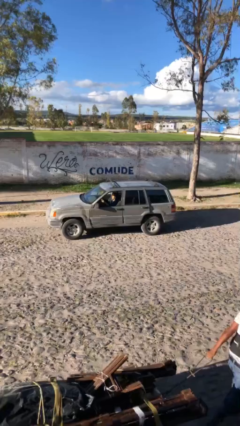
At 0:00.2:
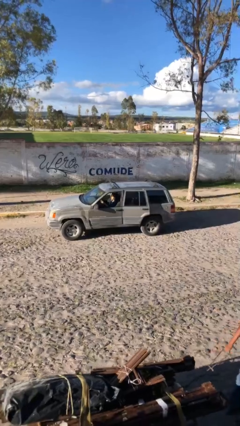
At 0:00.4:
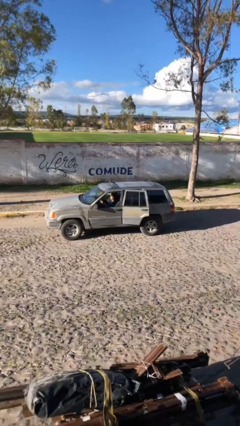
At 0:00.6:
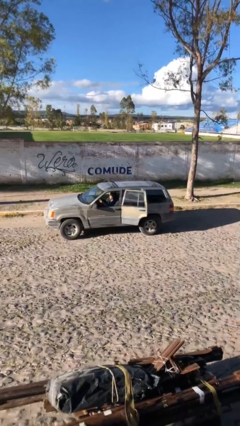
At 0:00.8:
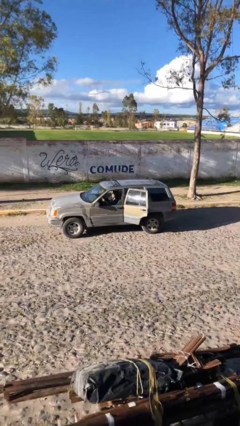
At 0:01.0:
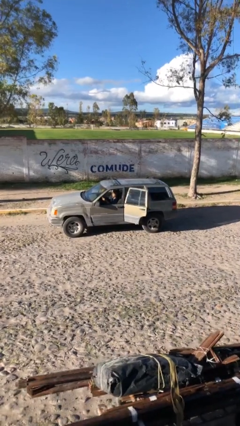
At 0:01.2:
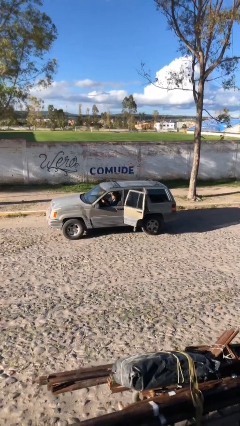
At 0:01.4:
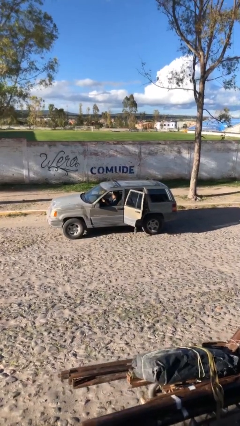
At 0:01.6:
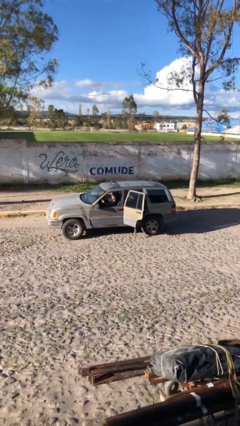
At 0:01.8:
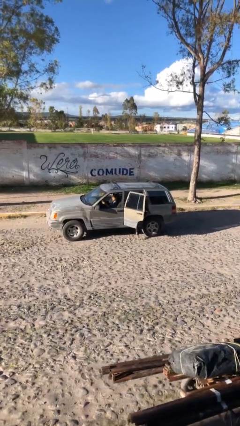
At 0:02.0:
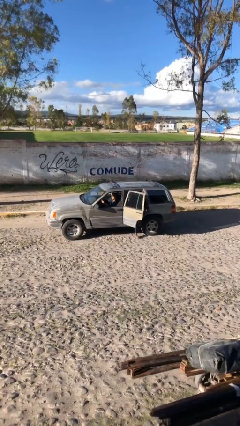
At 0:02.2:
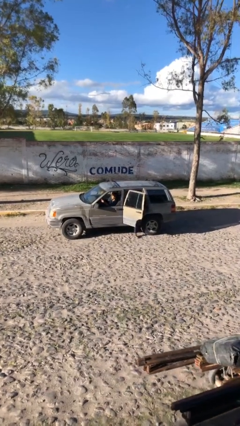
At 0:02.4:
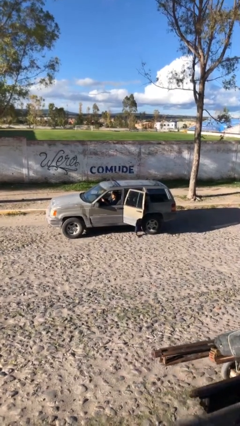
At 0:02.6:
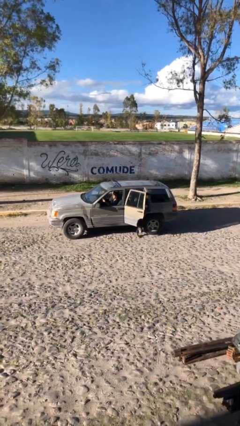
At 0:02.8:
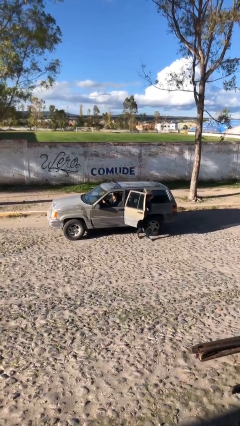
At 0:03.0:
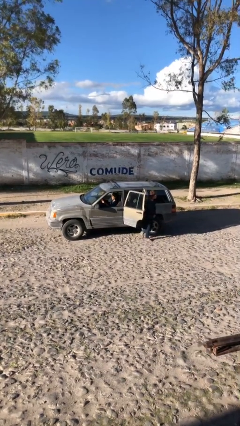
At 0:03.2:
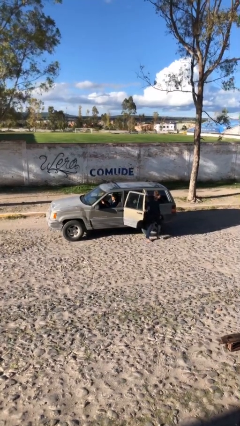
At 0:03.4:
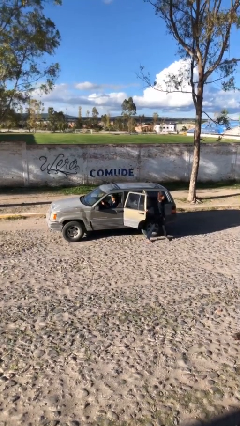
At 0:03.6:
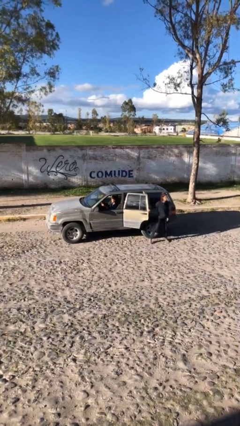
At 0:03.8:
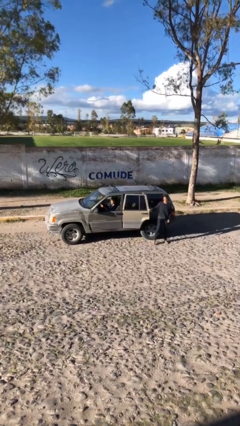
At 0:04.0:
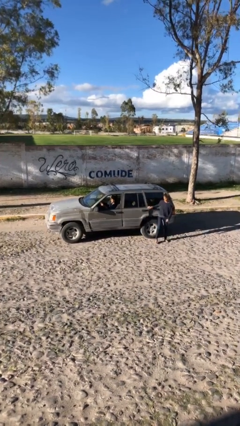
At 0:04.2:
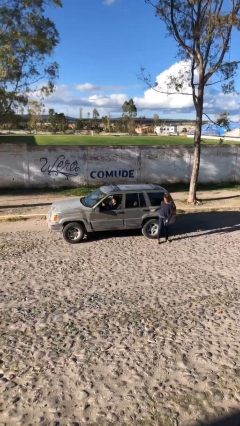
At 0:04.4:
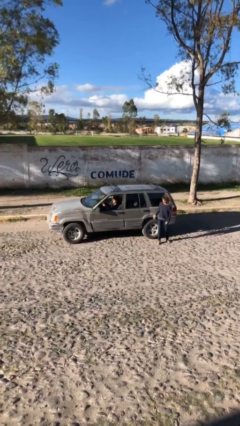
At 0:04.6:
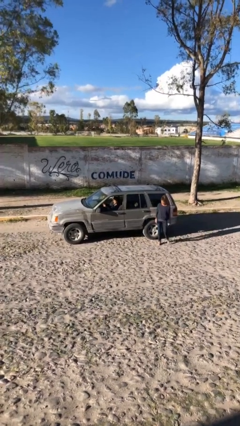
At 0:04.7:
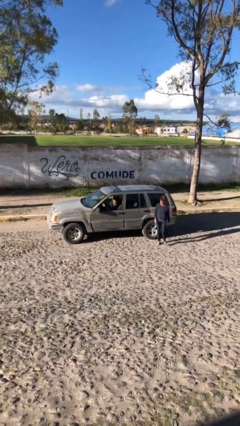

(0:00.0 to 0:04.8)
car drops off person

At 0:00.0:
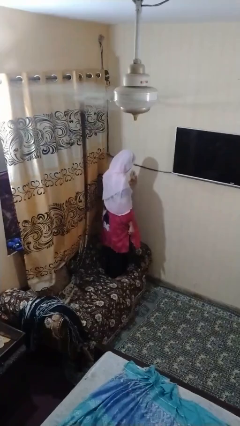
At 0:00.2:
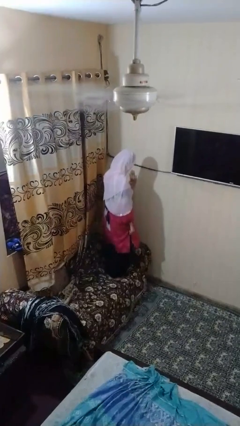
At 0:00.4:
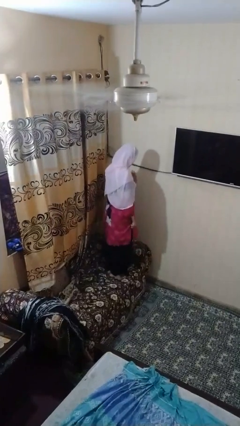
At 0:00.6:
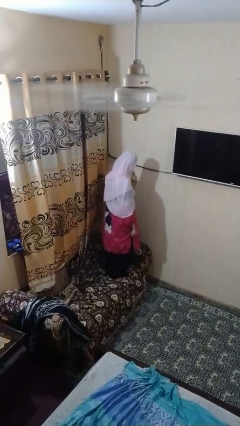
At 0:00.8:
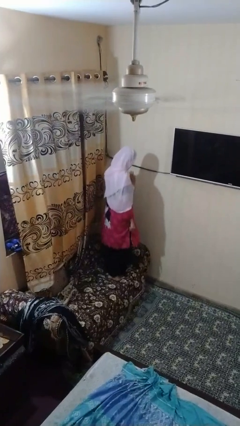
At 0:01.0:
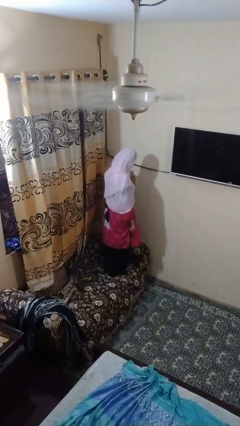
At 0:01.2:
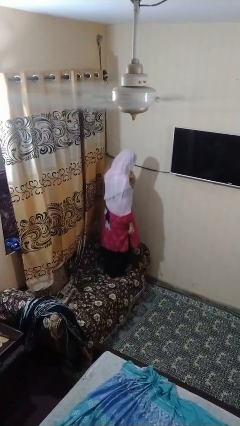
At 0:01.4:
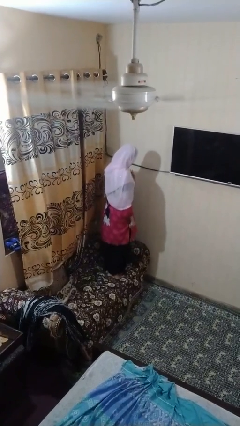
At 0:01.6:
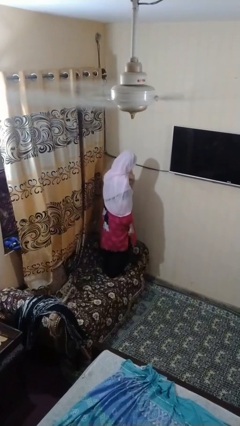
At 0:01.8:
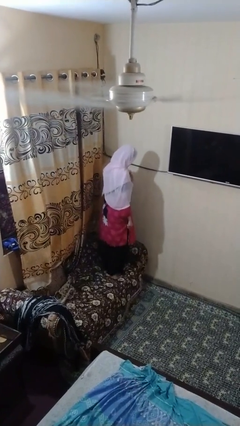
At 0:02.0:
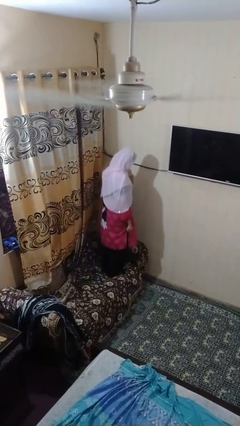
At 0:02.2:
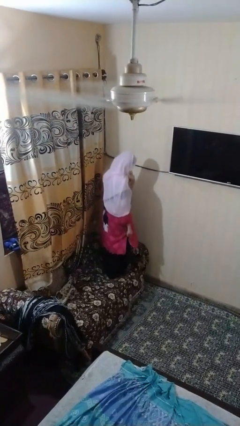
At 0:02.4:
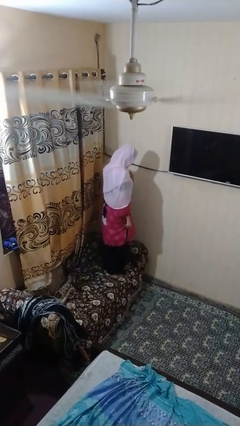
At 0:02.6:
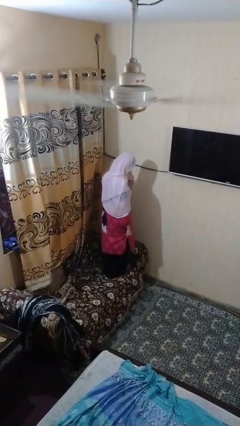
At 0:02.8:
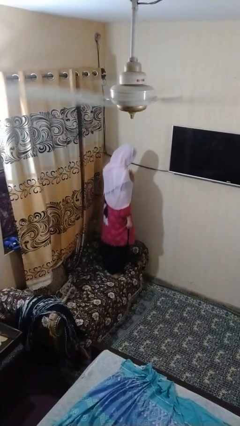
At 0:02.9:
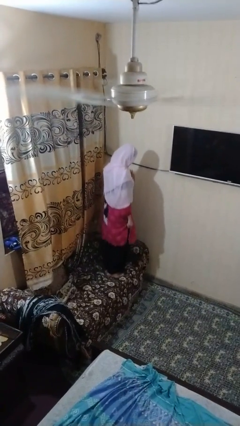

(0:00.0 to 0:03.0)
person jumps on couch

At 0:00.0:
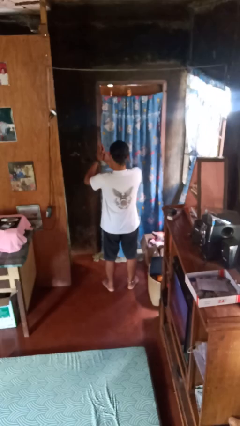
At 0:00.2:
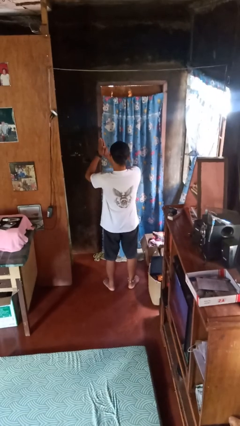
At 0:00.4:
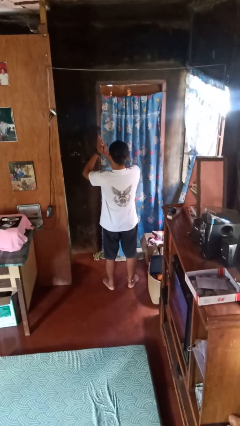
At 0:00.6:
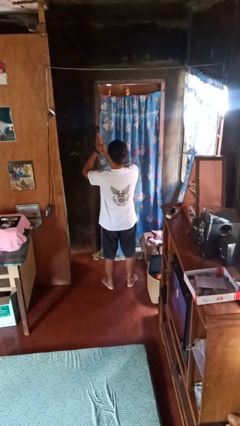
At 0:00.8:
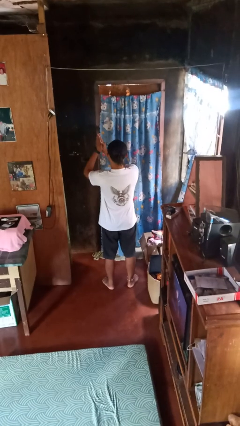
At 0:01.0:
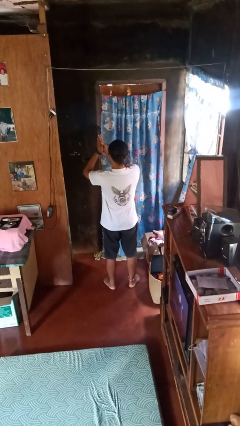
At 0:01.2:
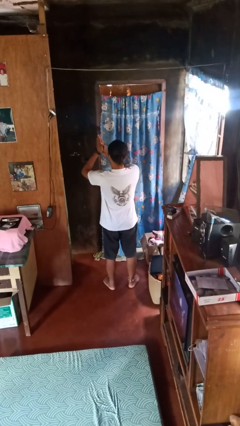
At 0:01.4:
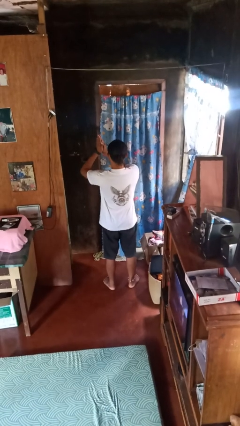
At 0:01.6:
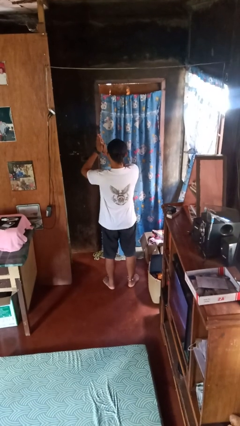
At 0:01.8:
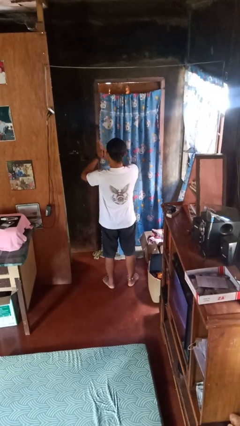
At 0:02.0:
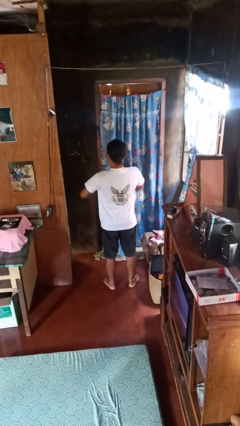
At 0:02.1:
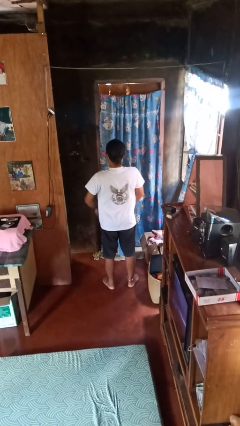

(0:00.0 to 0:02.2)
person prays

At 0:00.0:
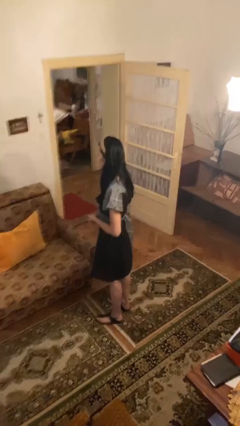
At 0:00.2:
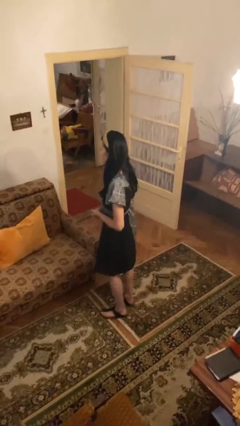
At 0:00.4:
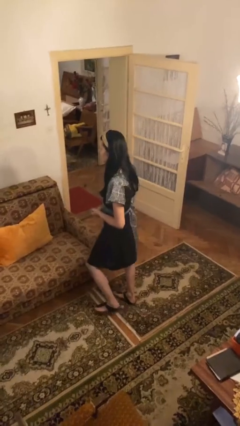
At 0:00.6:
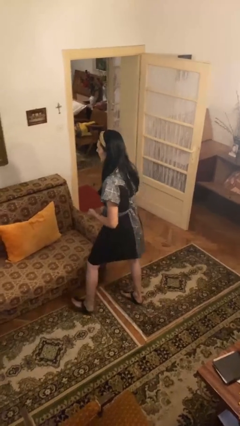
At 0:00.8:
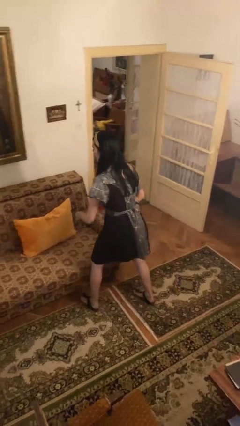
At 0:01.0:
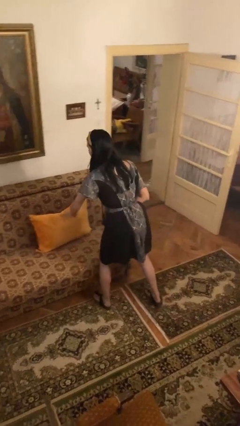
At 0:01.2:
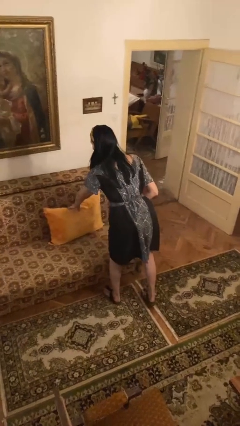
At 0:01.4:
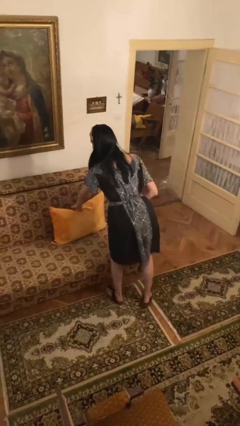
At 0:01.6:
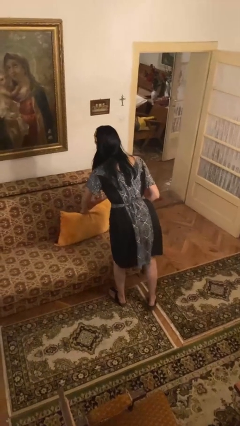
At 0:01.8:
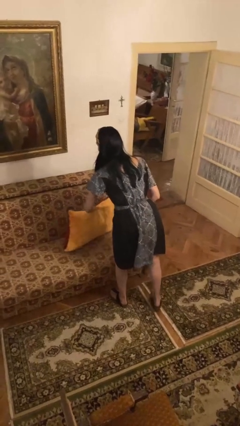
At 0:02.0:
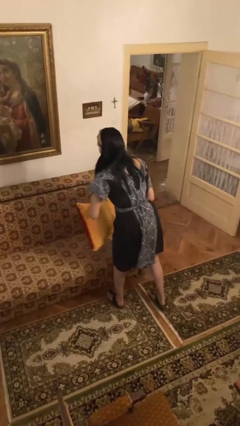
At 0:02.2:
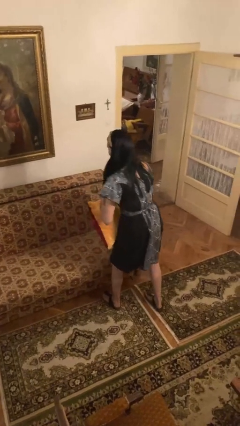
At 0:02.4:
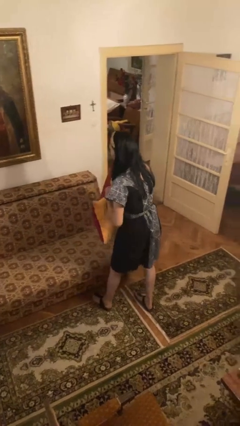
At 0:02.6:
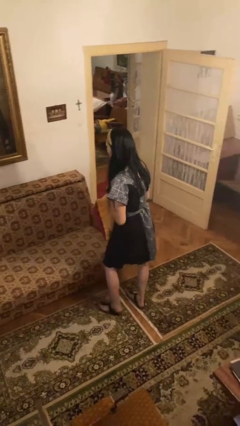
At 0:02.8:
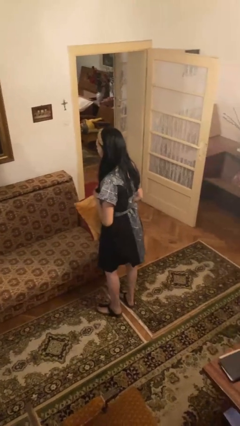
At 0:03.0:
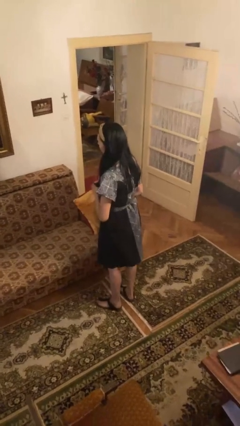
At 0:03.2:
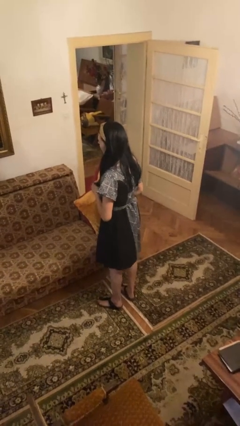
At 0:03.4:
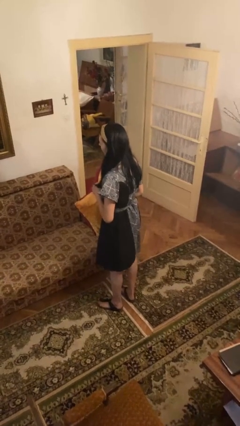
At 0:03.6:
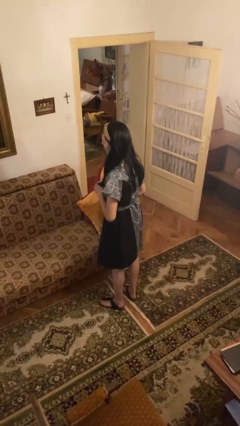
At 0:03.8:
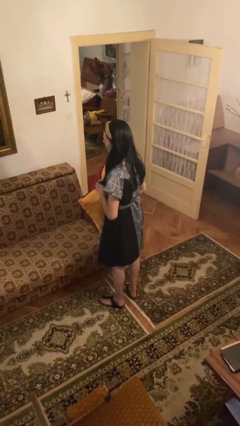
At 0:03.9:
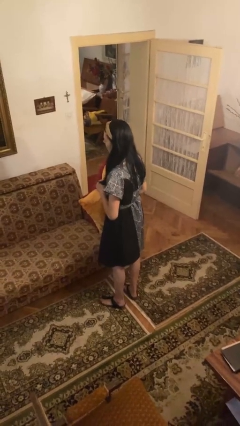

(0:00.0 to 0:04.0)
person picks up object from couch

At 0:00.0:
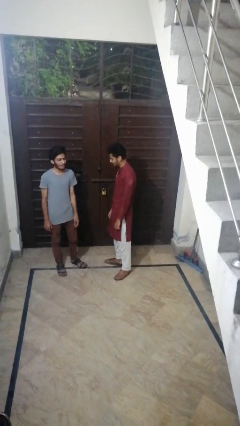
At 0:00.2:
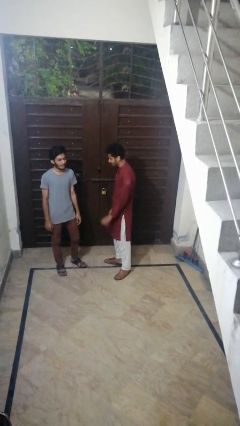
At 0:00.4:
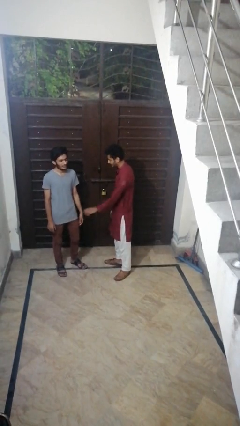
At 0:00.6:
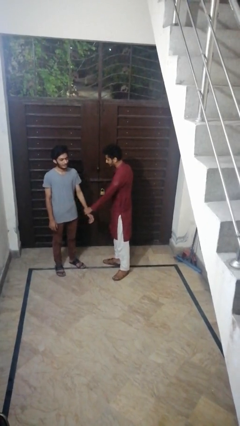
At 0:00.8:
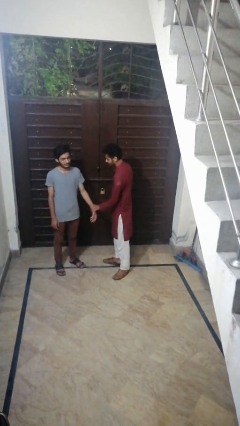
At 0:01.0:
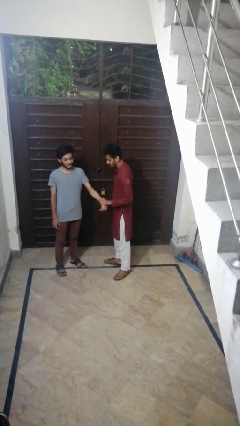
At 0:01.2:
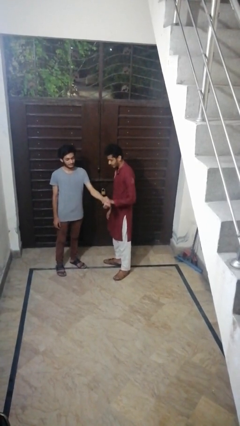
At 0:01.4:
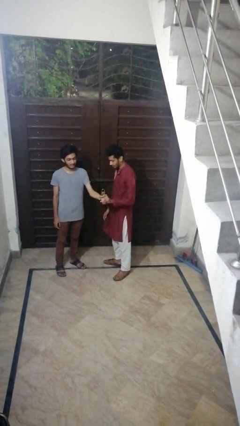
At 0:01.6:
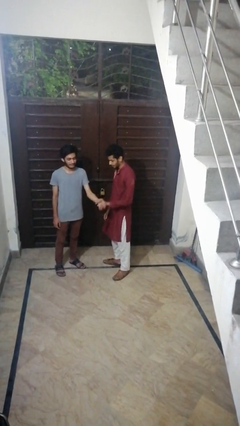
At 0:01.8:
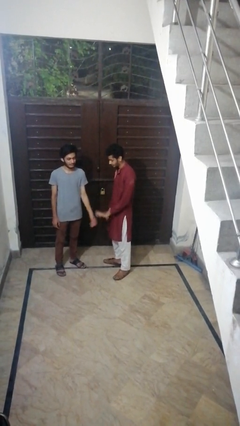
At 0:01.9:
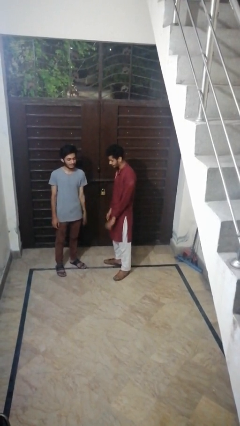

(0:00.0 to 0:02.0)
person grabs person by forearm

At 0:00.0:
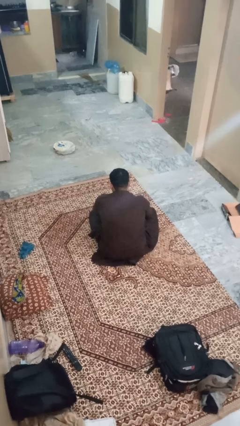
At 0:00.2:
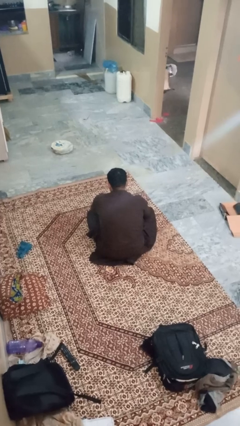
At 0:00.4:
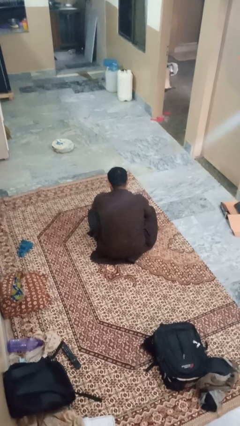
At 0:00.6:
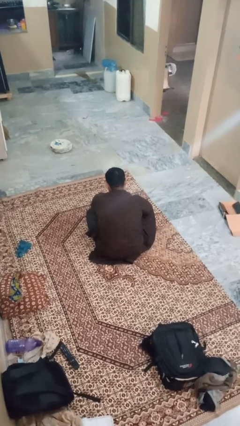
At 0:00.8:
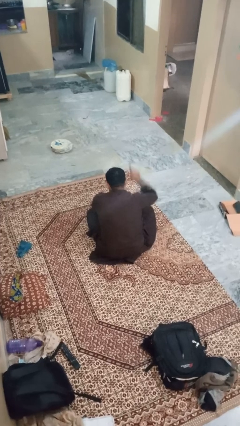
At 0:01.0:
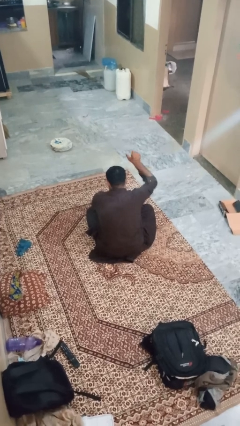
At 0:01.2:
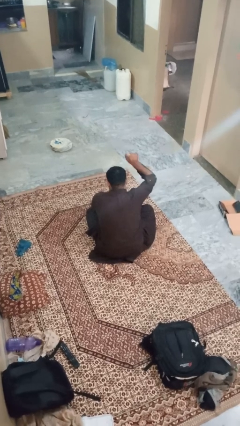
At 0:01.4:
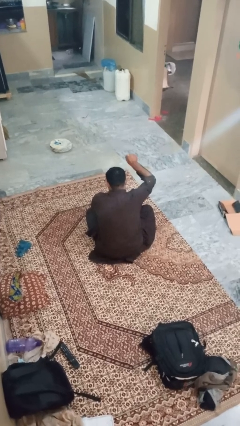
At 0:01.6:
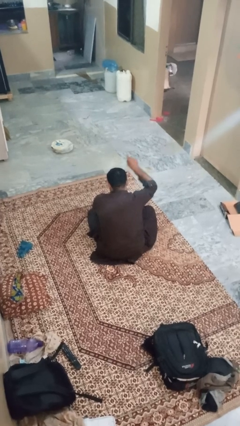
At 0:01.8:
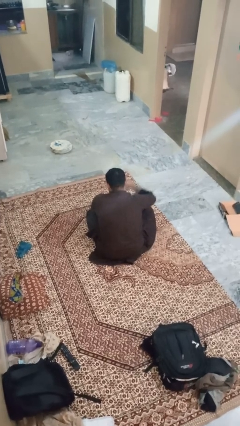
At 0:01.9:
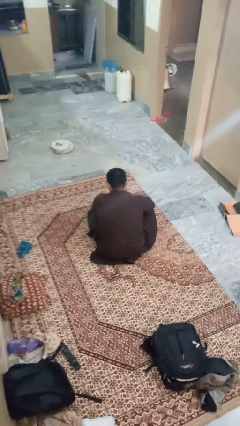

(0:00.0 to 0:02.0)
person gestures number one
